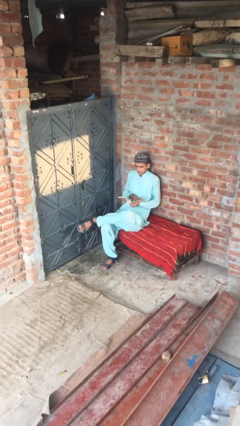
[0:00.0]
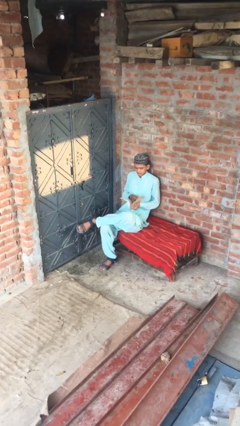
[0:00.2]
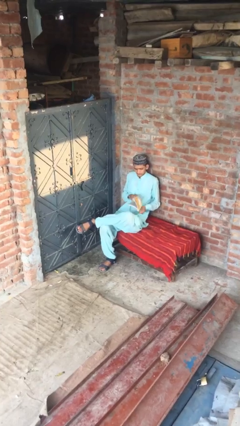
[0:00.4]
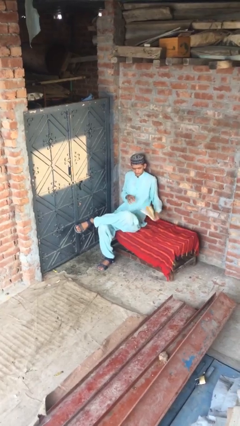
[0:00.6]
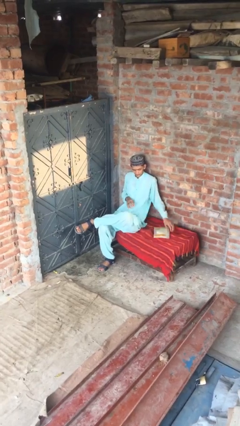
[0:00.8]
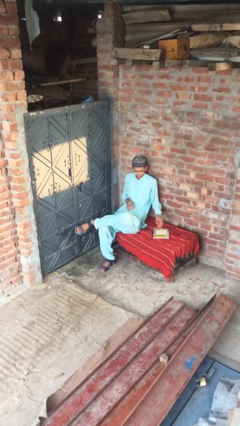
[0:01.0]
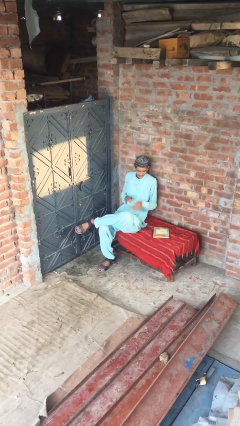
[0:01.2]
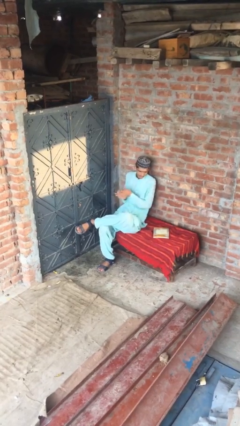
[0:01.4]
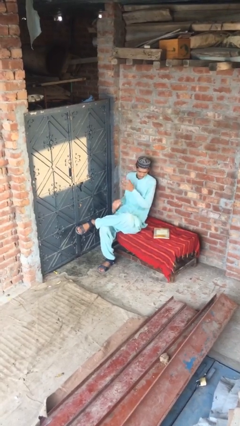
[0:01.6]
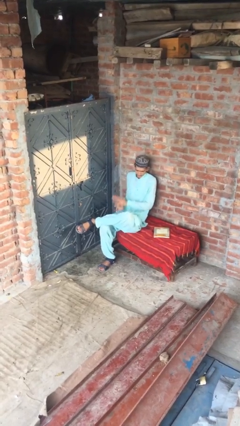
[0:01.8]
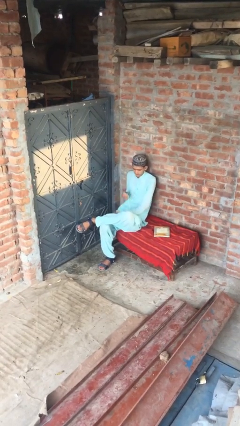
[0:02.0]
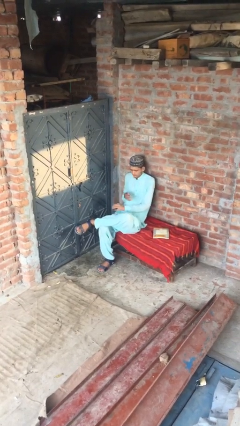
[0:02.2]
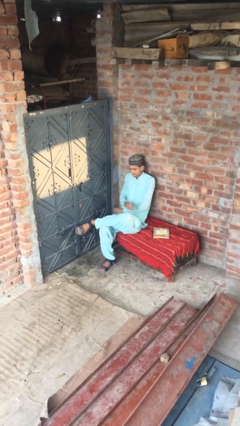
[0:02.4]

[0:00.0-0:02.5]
person puts down object on table

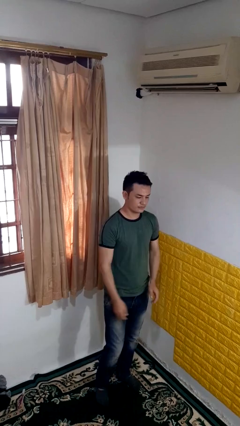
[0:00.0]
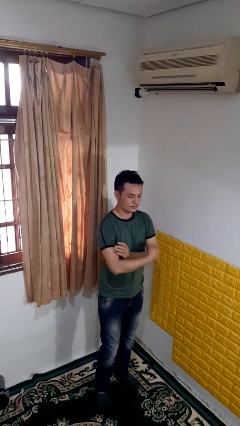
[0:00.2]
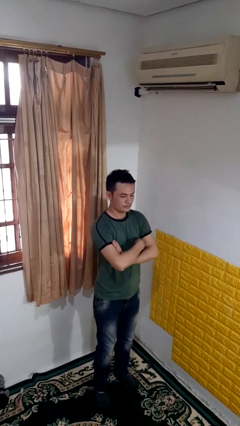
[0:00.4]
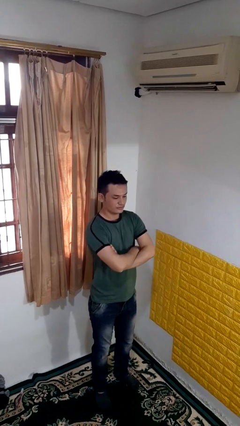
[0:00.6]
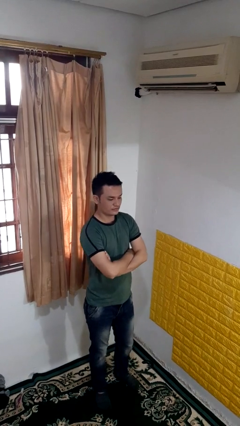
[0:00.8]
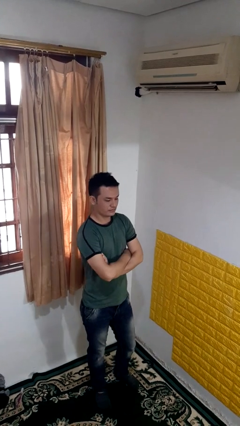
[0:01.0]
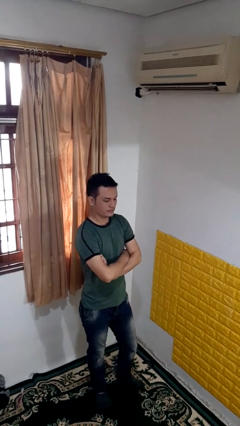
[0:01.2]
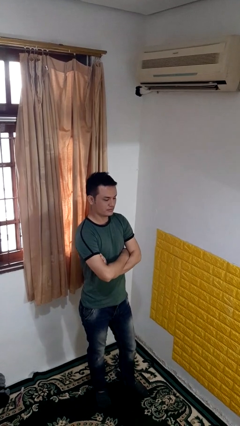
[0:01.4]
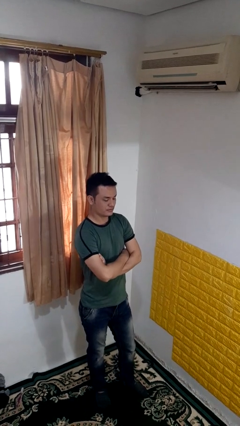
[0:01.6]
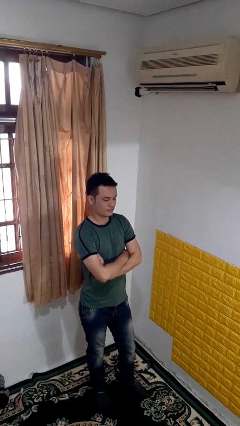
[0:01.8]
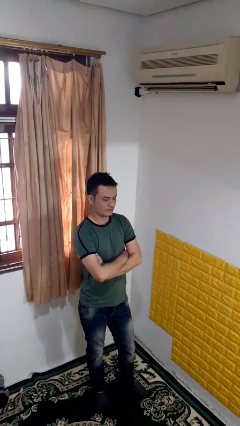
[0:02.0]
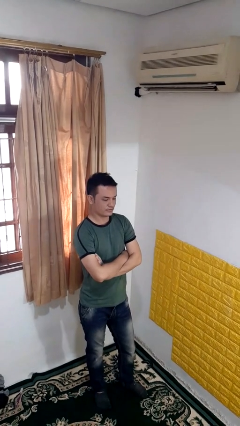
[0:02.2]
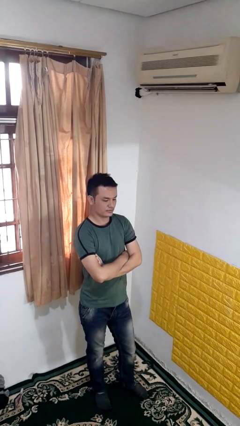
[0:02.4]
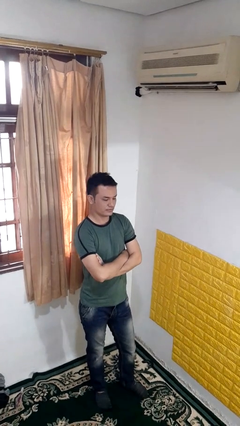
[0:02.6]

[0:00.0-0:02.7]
person crosses arms

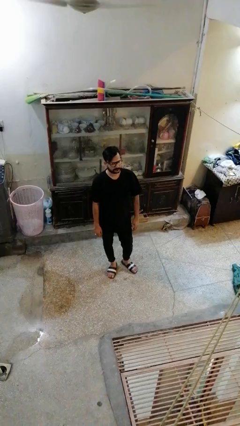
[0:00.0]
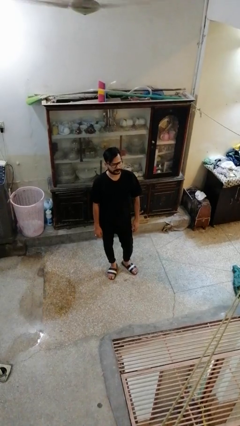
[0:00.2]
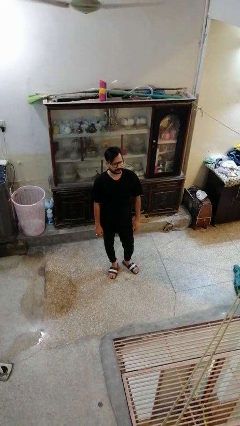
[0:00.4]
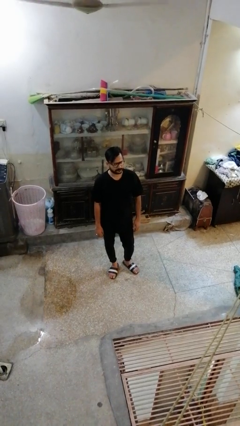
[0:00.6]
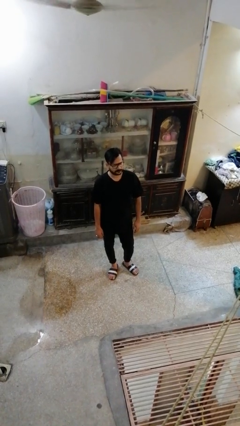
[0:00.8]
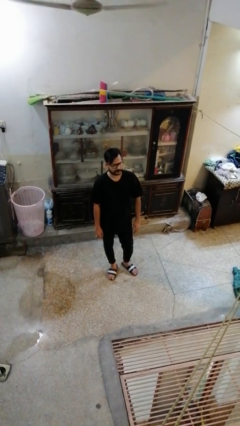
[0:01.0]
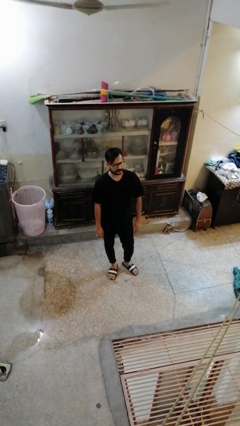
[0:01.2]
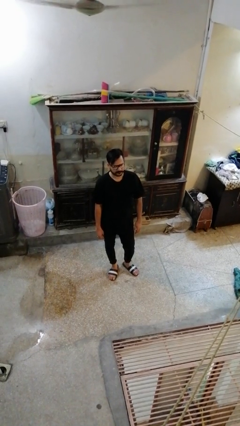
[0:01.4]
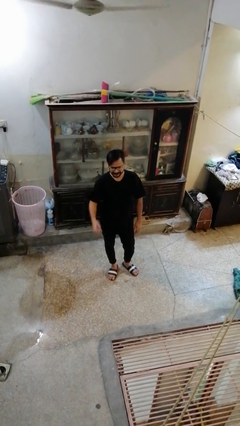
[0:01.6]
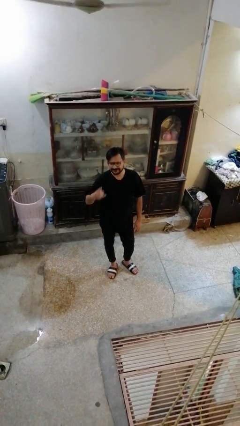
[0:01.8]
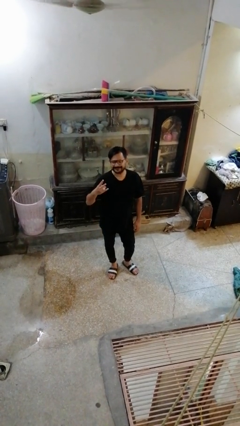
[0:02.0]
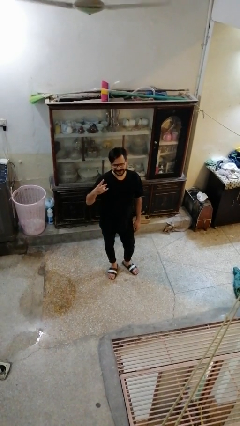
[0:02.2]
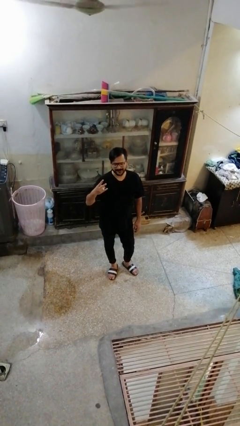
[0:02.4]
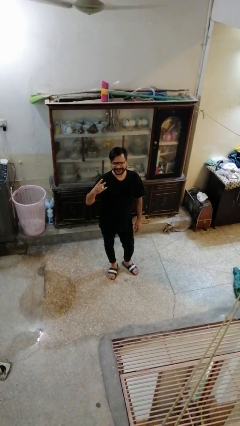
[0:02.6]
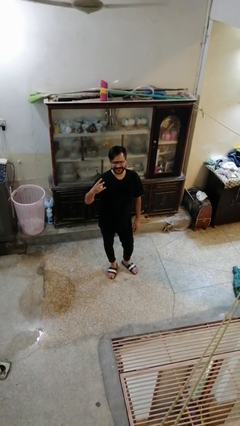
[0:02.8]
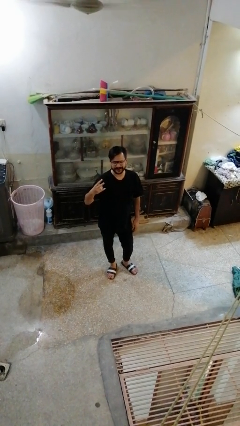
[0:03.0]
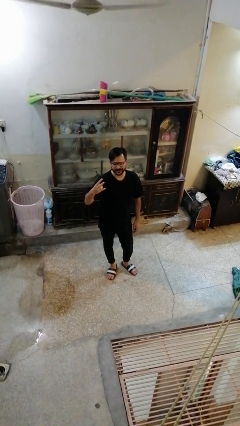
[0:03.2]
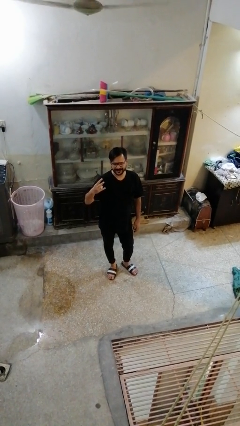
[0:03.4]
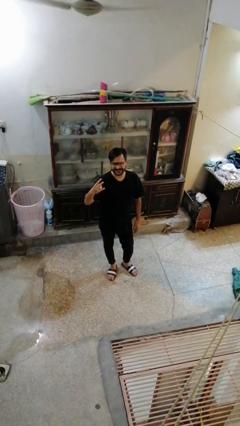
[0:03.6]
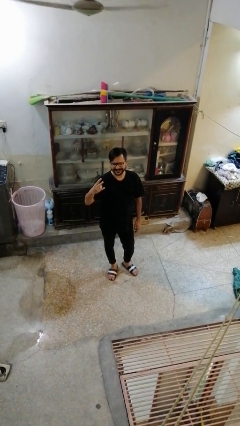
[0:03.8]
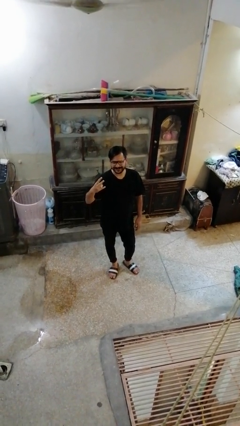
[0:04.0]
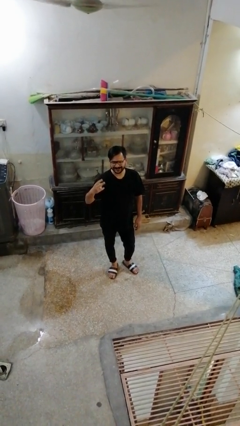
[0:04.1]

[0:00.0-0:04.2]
person gestures peace

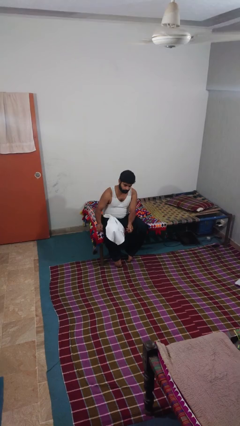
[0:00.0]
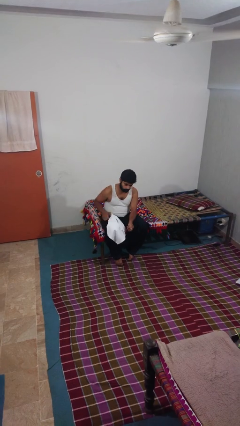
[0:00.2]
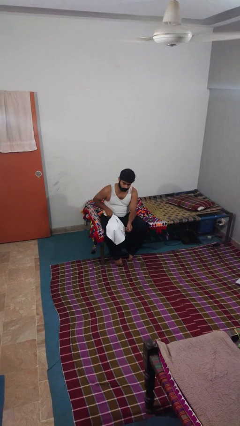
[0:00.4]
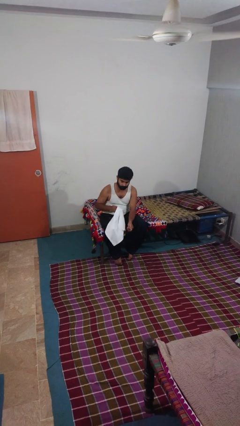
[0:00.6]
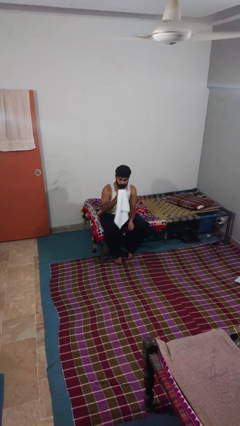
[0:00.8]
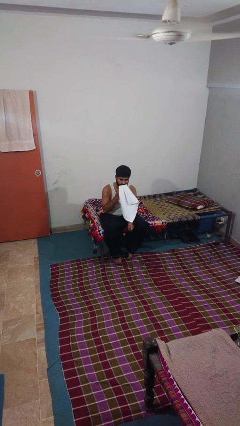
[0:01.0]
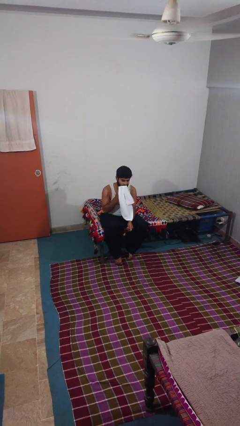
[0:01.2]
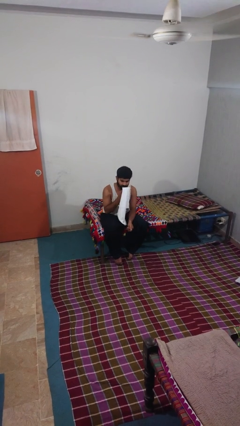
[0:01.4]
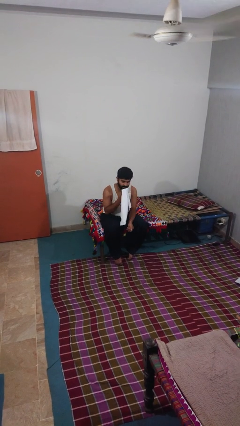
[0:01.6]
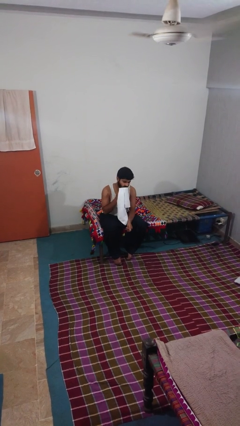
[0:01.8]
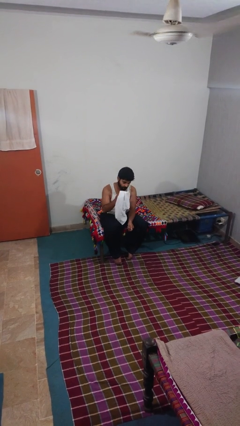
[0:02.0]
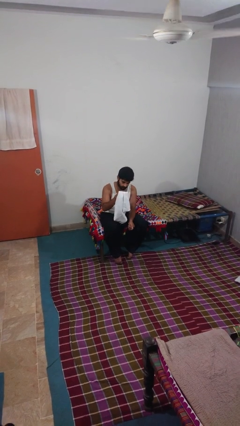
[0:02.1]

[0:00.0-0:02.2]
person wipes mouth with napkin

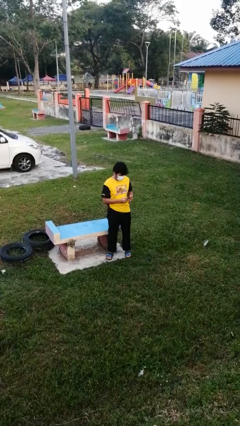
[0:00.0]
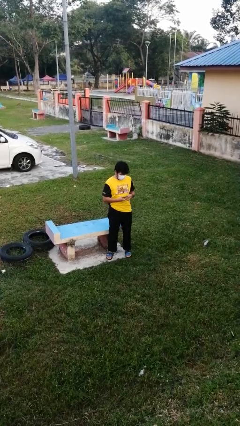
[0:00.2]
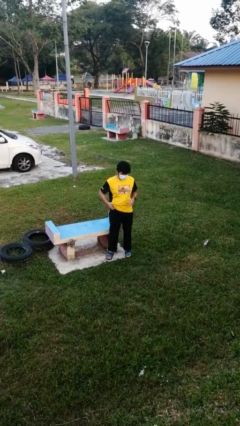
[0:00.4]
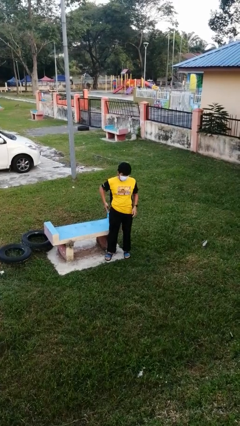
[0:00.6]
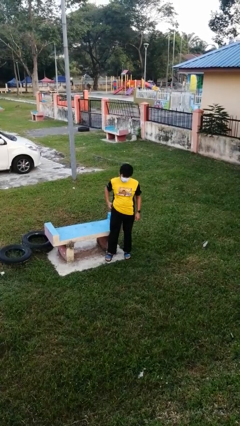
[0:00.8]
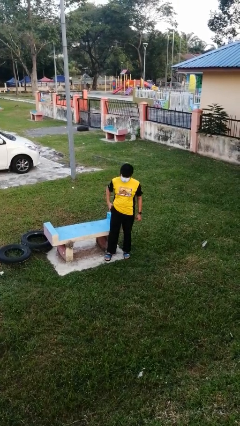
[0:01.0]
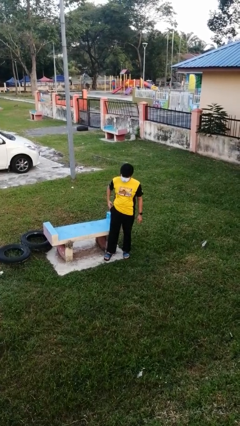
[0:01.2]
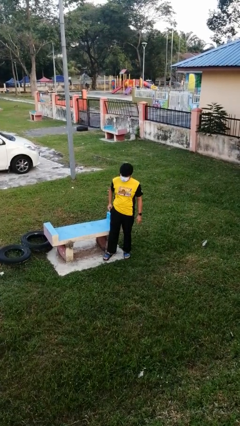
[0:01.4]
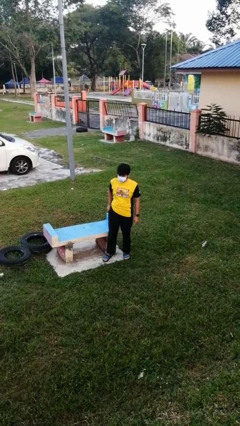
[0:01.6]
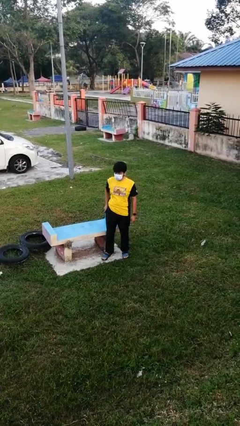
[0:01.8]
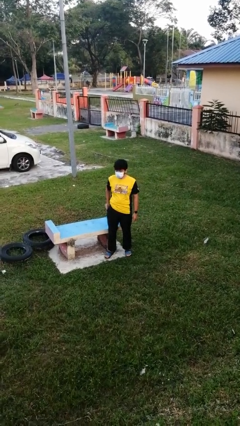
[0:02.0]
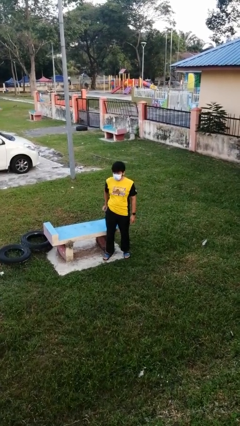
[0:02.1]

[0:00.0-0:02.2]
person puts phone into pocket

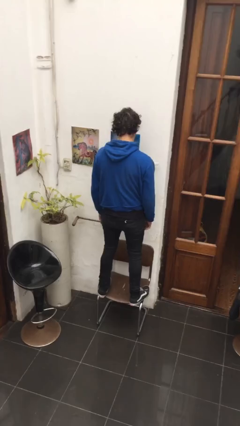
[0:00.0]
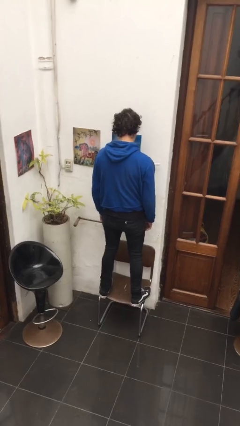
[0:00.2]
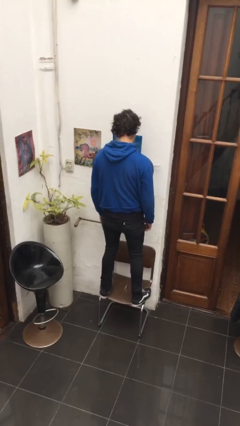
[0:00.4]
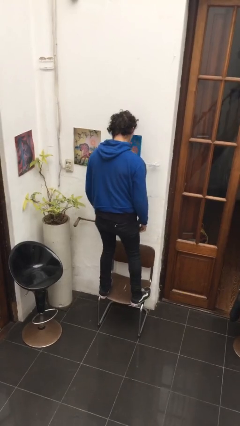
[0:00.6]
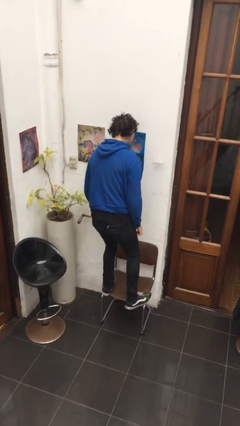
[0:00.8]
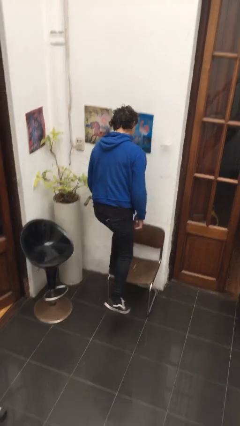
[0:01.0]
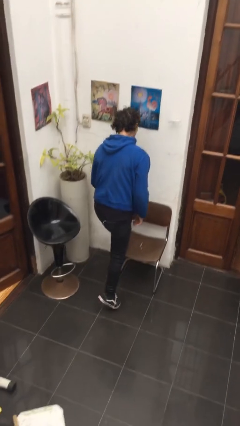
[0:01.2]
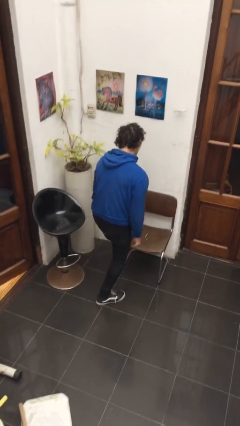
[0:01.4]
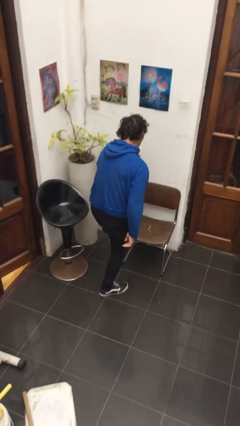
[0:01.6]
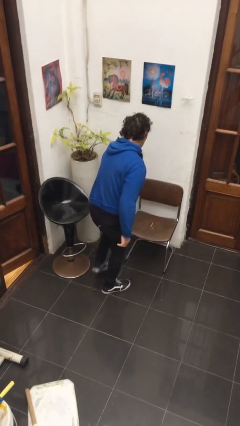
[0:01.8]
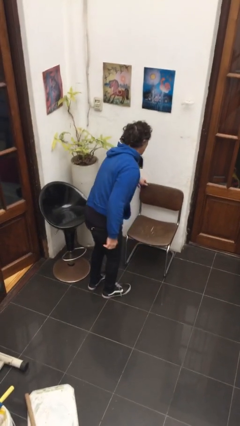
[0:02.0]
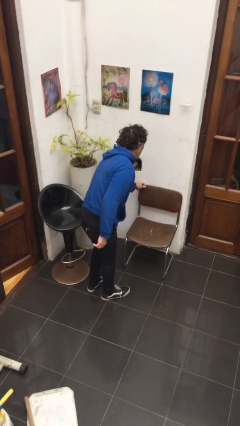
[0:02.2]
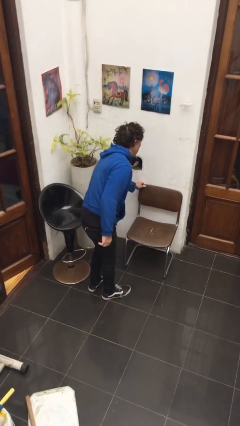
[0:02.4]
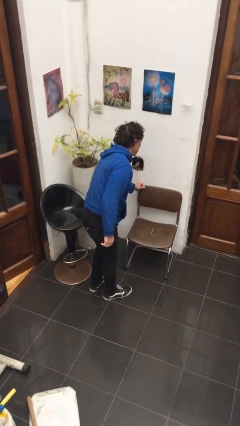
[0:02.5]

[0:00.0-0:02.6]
person climbs off chair

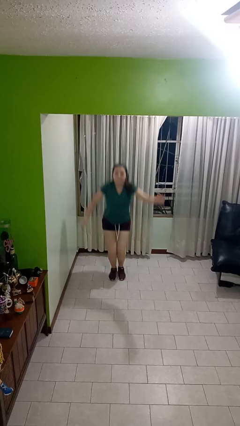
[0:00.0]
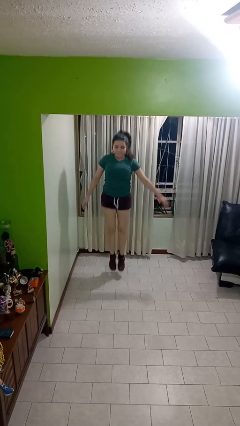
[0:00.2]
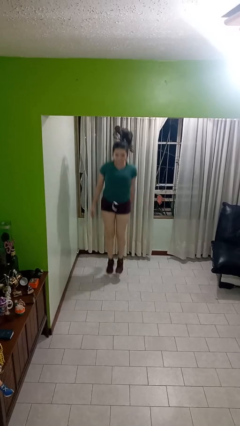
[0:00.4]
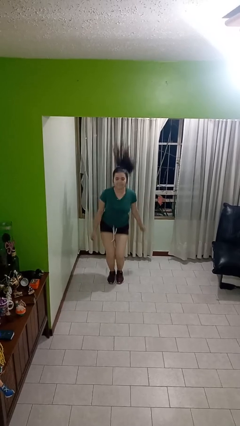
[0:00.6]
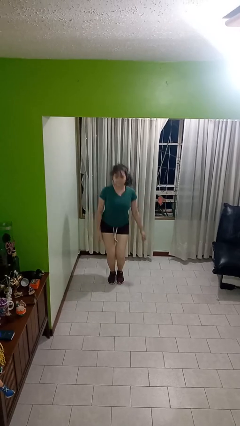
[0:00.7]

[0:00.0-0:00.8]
person jumps
